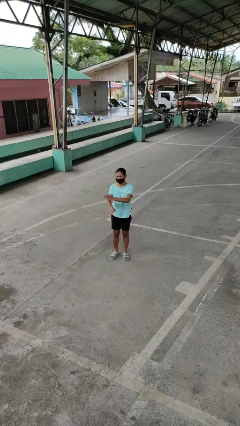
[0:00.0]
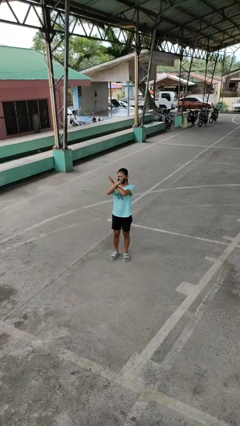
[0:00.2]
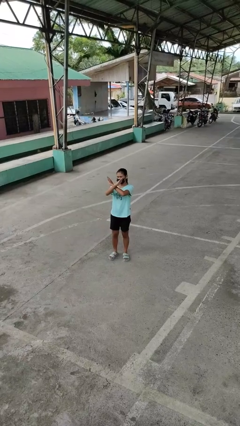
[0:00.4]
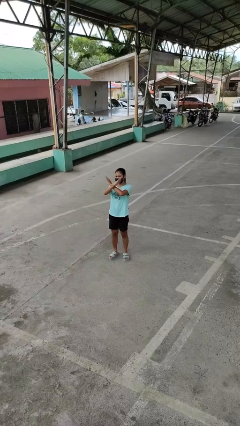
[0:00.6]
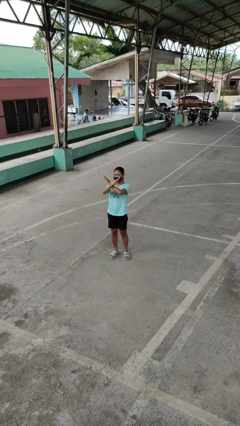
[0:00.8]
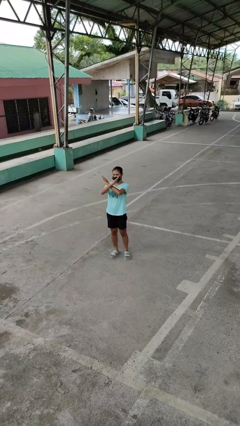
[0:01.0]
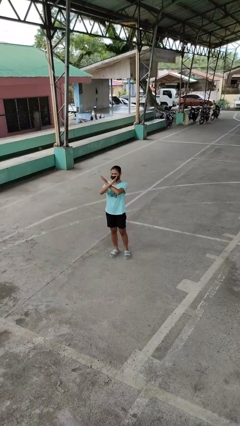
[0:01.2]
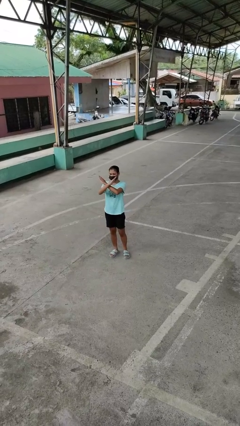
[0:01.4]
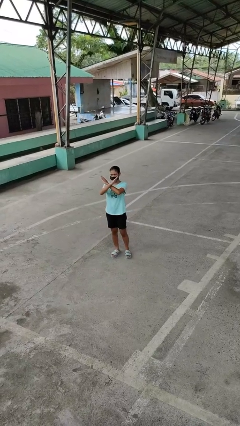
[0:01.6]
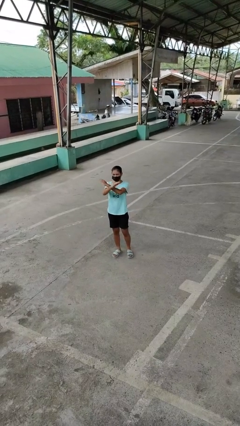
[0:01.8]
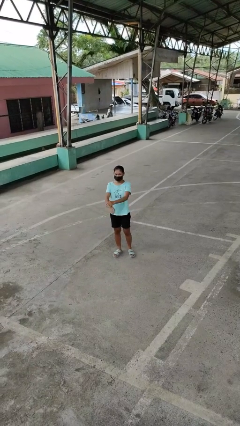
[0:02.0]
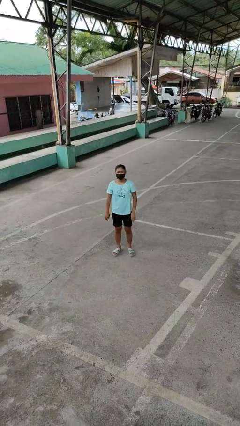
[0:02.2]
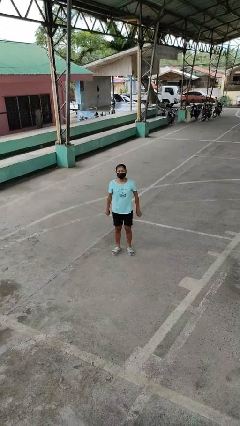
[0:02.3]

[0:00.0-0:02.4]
person gestures arms x

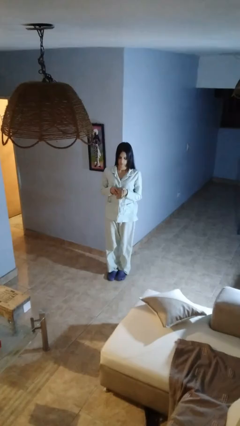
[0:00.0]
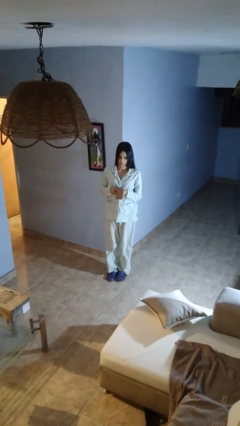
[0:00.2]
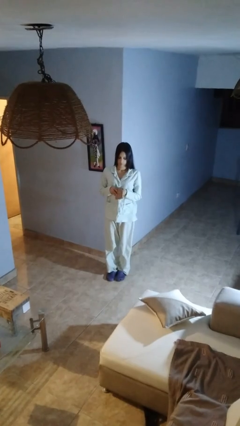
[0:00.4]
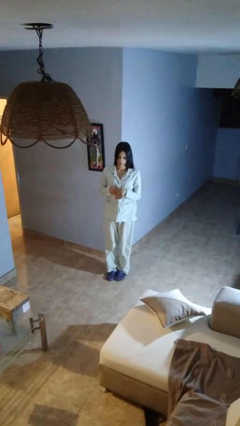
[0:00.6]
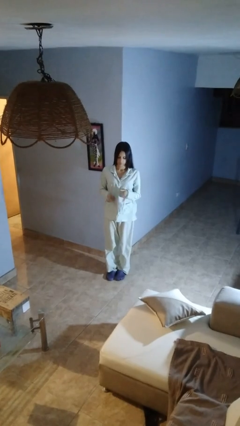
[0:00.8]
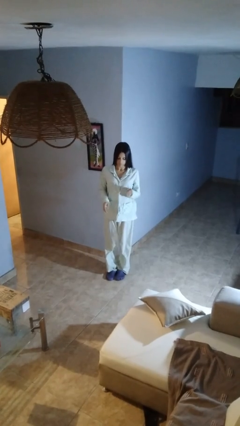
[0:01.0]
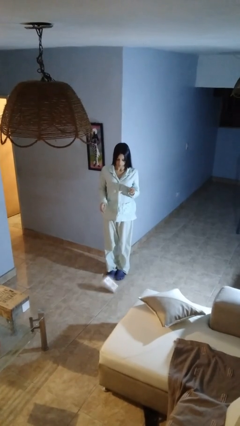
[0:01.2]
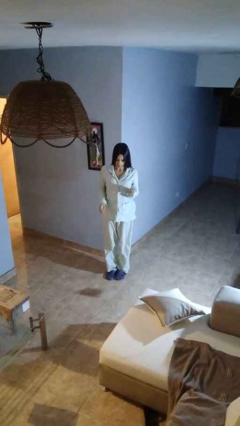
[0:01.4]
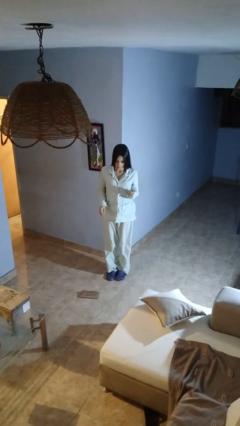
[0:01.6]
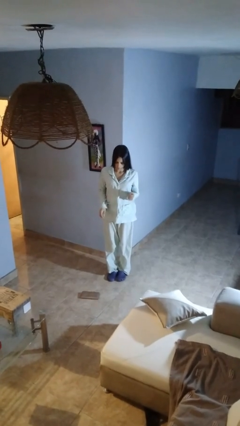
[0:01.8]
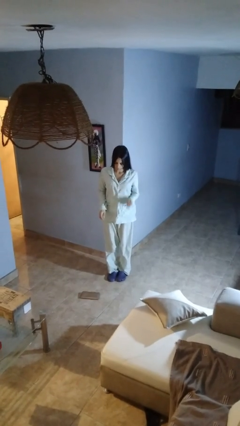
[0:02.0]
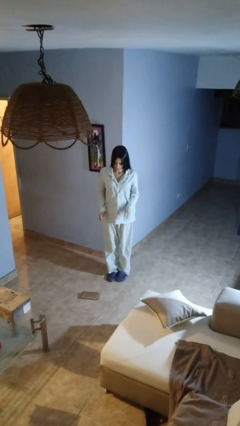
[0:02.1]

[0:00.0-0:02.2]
person drops object

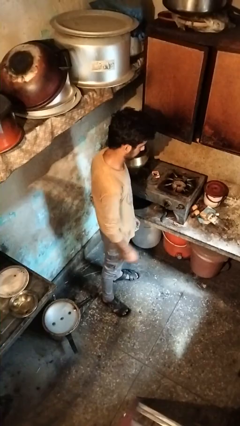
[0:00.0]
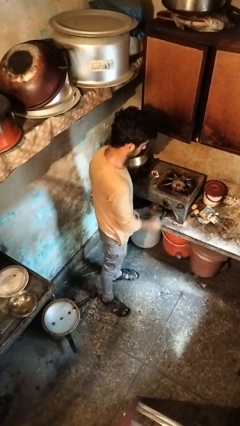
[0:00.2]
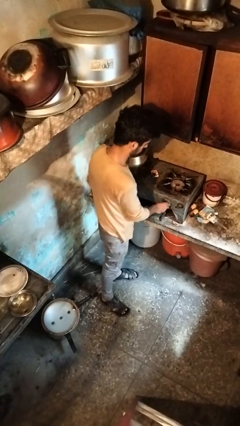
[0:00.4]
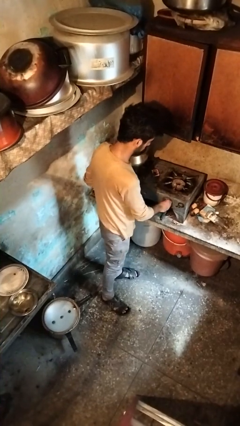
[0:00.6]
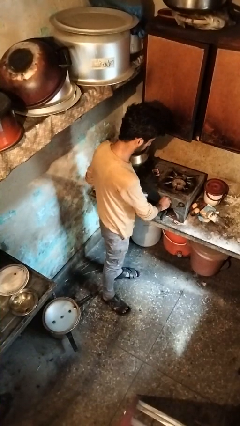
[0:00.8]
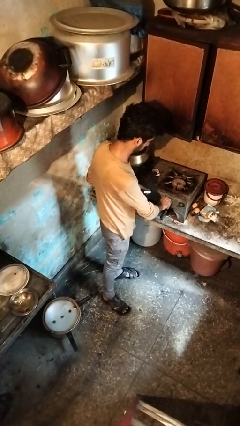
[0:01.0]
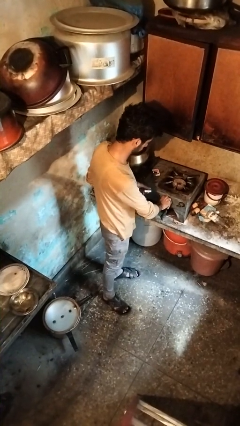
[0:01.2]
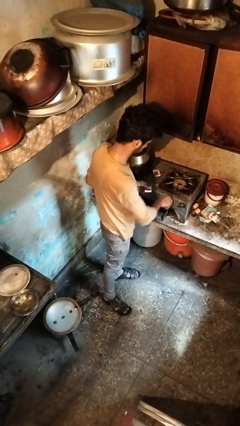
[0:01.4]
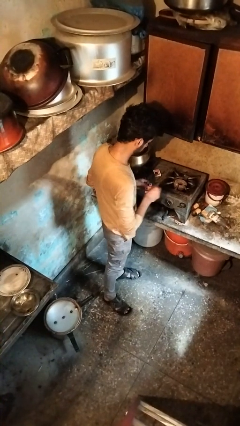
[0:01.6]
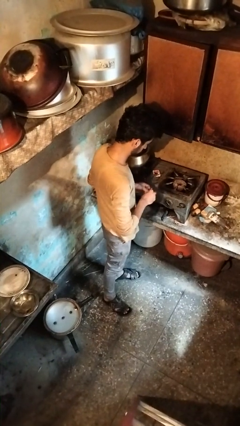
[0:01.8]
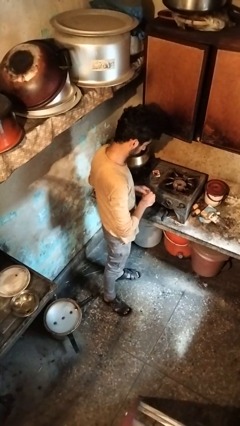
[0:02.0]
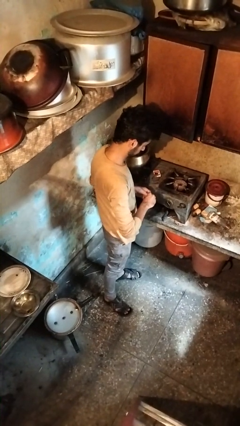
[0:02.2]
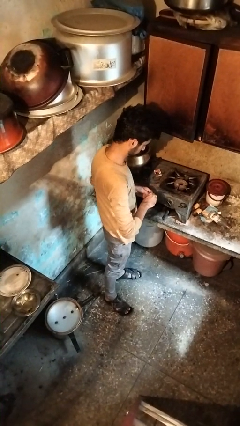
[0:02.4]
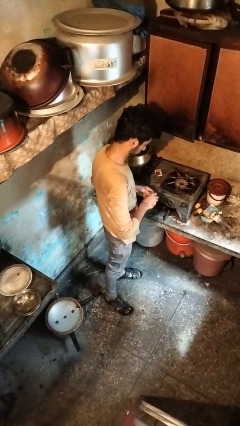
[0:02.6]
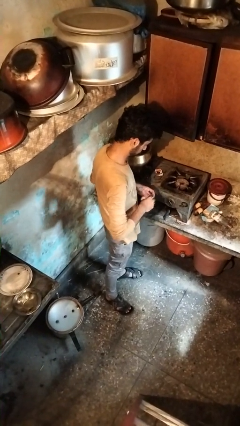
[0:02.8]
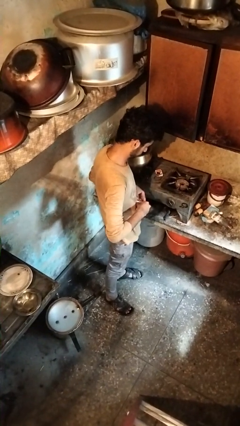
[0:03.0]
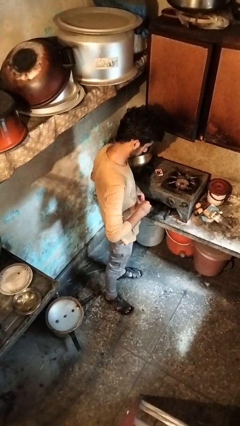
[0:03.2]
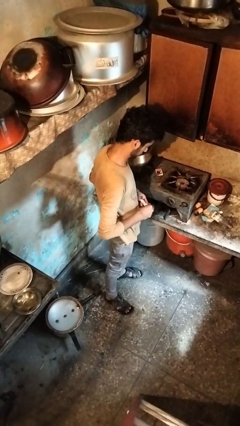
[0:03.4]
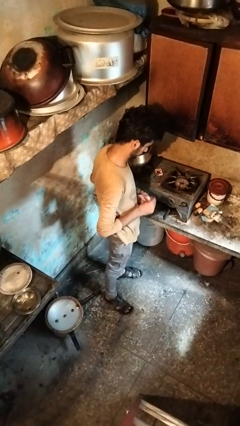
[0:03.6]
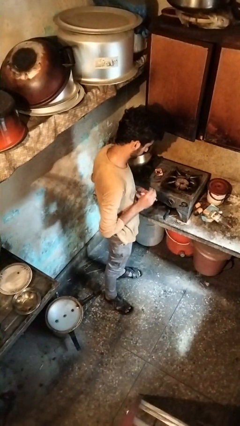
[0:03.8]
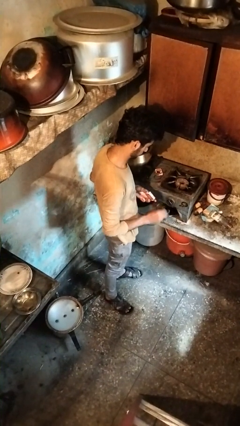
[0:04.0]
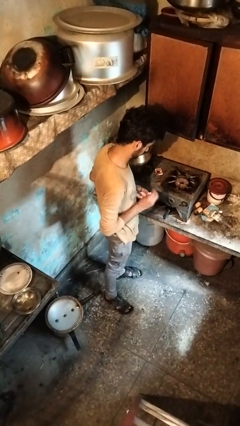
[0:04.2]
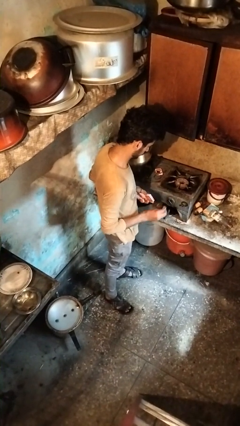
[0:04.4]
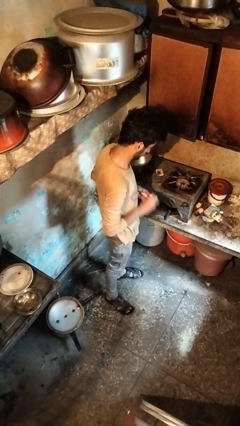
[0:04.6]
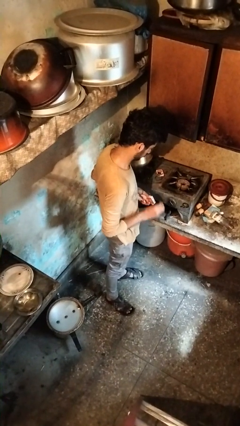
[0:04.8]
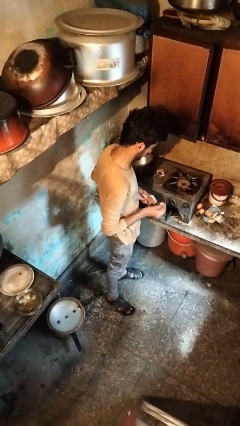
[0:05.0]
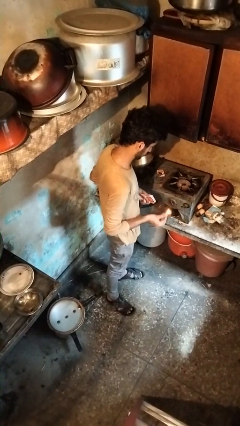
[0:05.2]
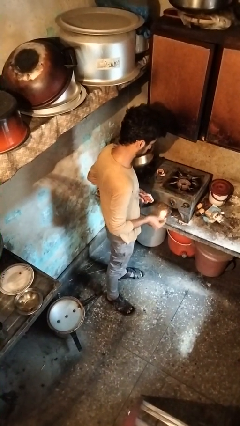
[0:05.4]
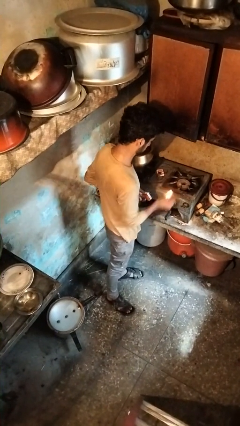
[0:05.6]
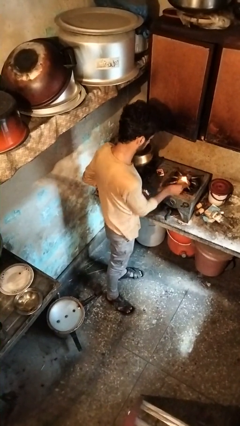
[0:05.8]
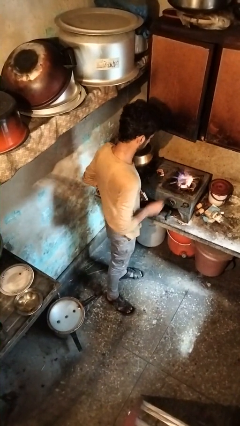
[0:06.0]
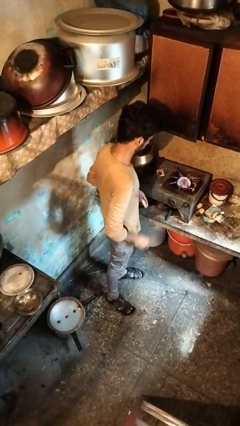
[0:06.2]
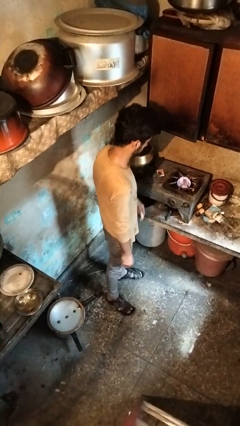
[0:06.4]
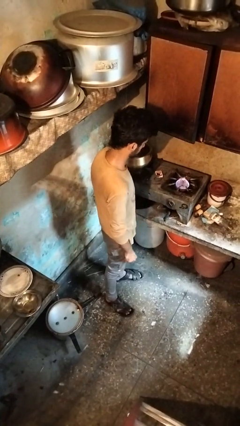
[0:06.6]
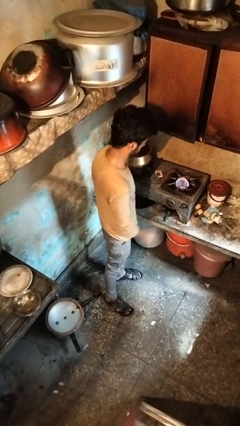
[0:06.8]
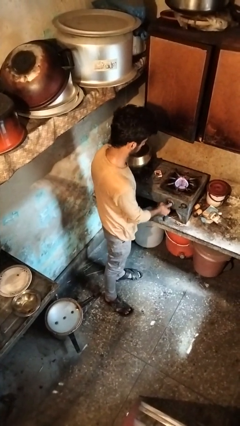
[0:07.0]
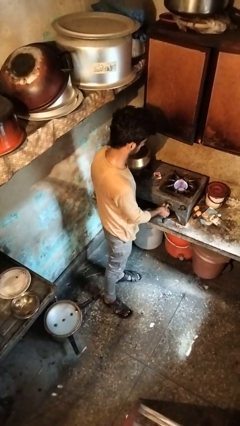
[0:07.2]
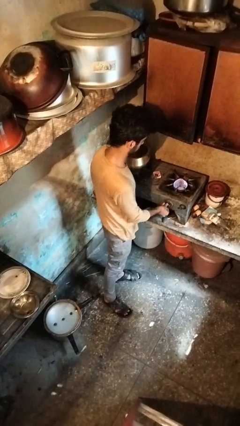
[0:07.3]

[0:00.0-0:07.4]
person turns on stovetop

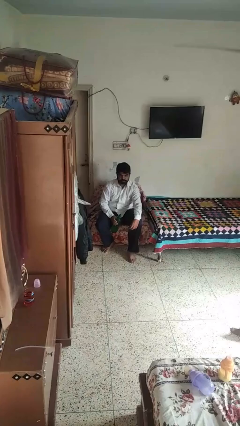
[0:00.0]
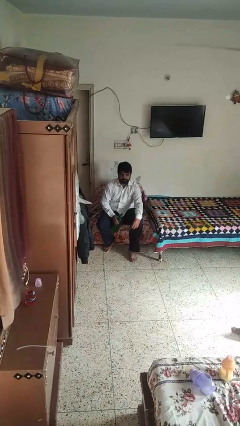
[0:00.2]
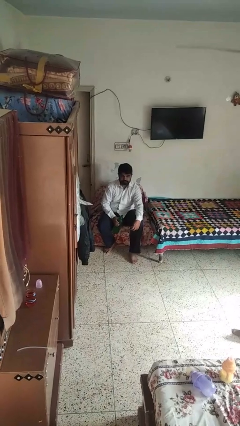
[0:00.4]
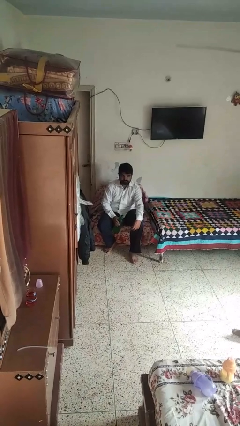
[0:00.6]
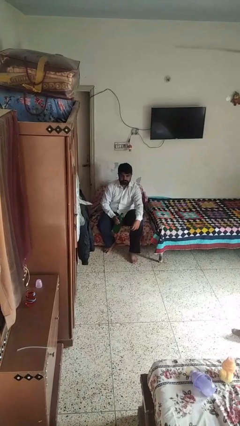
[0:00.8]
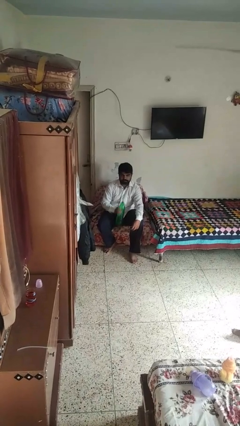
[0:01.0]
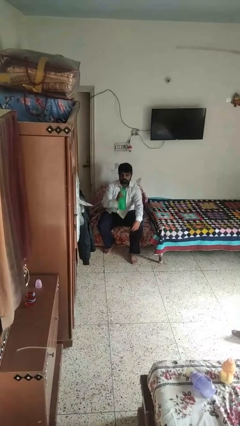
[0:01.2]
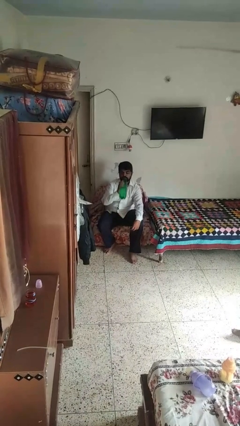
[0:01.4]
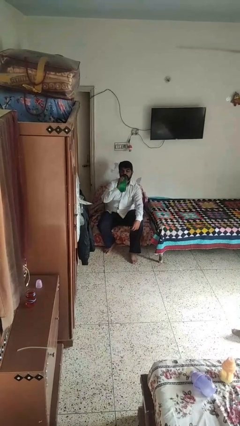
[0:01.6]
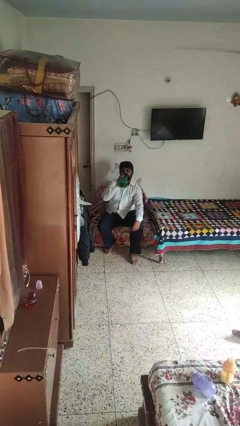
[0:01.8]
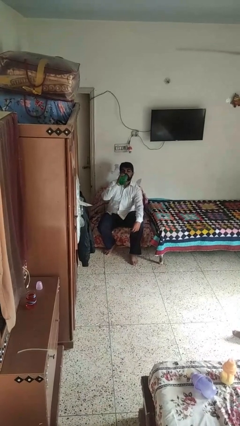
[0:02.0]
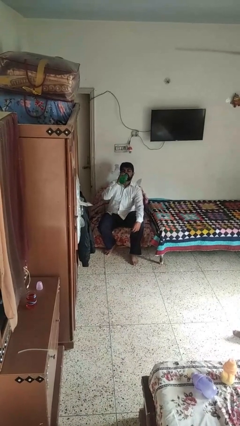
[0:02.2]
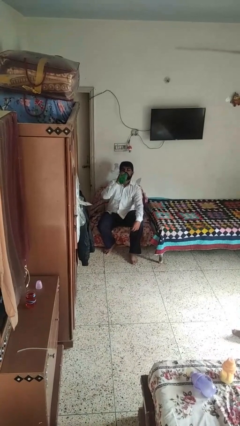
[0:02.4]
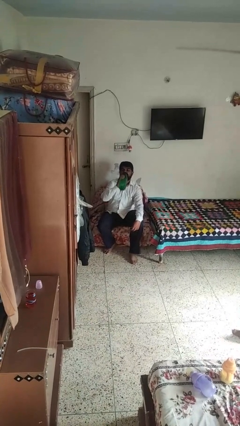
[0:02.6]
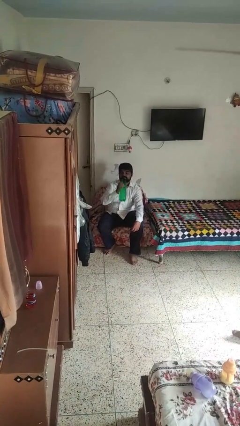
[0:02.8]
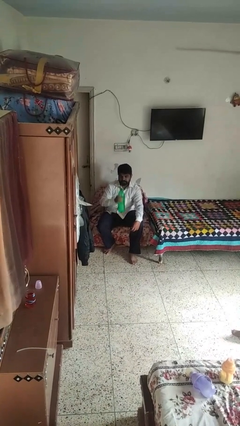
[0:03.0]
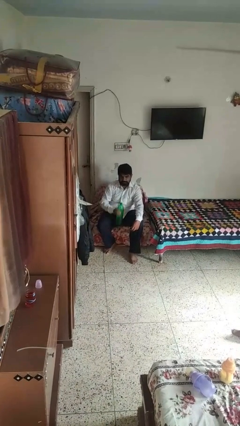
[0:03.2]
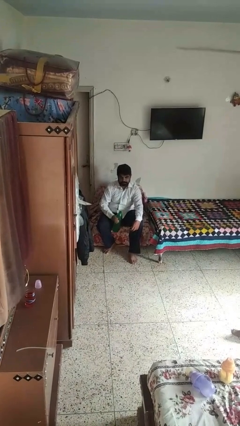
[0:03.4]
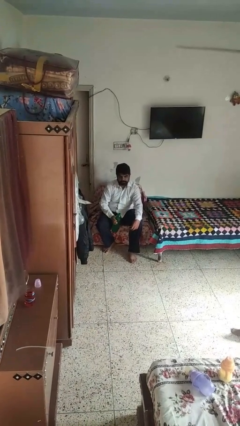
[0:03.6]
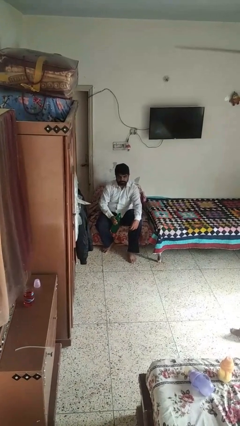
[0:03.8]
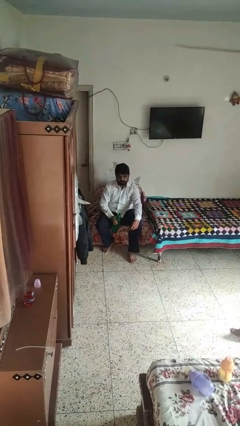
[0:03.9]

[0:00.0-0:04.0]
person drinks from bottle

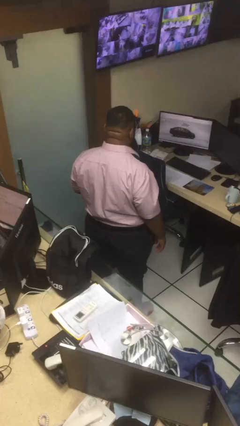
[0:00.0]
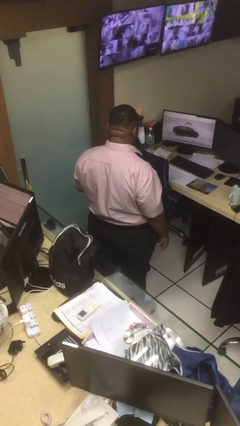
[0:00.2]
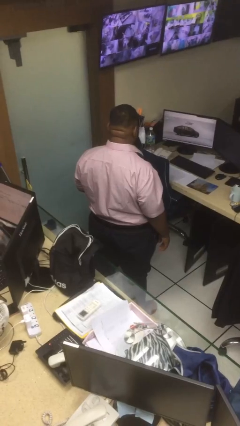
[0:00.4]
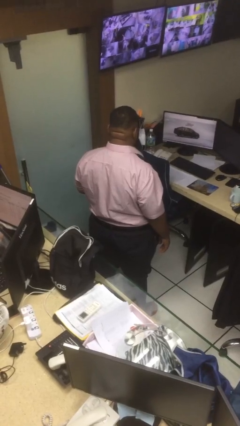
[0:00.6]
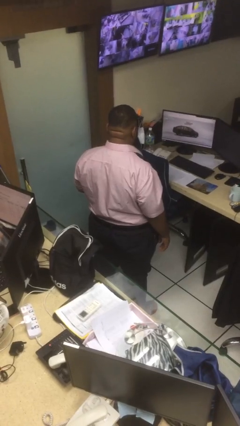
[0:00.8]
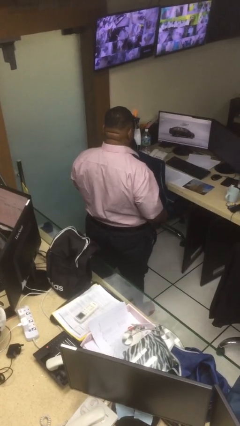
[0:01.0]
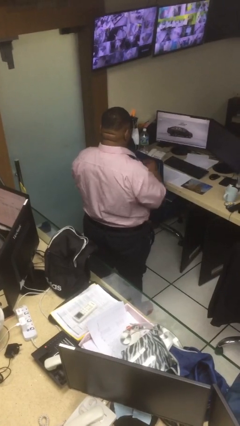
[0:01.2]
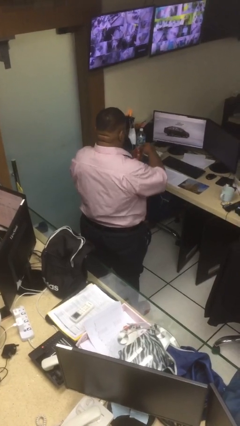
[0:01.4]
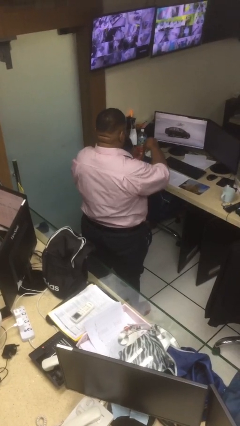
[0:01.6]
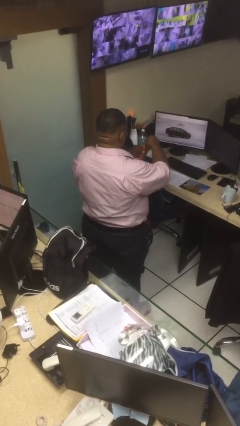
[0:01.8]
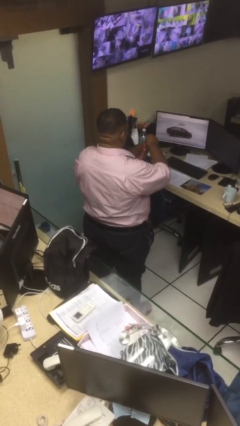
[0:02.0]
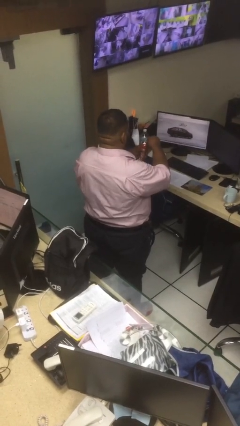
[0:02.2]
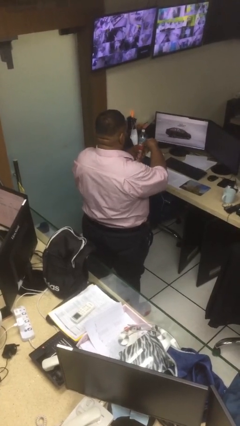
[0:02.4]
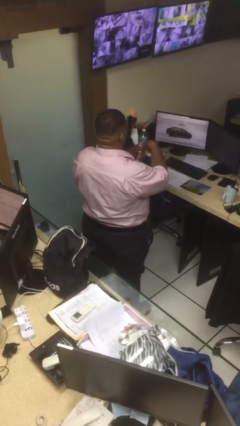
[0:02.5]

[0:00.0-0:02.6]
person opens beverage can
